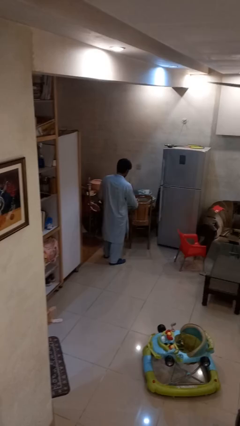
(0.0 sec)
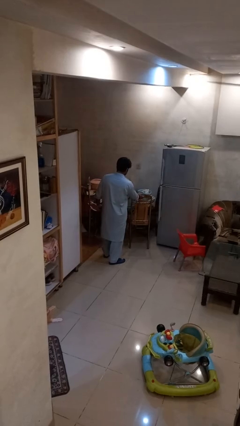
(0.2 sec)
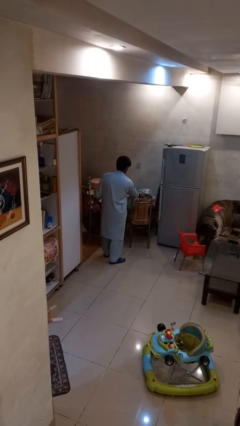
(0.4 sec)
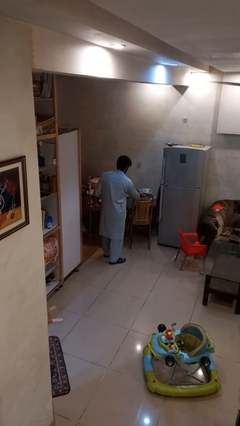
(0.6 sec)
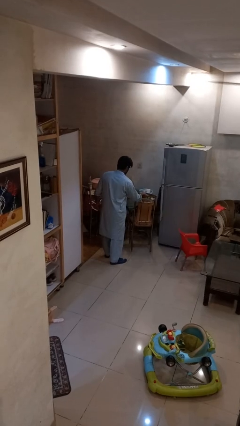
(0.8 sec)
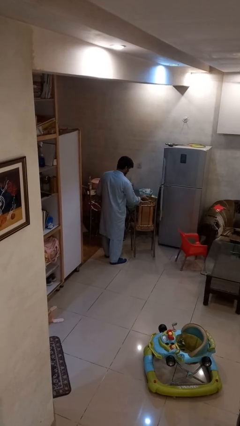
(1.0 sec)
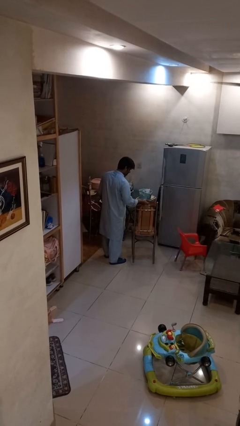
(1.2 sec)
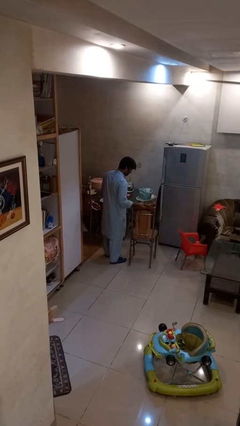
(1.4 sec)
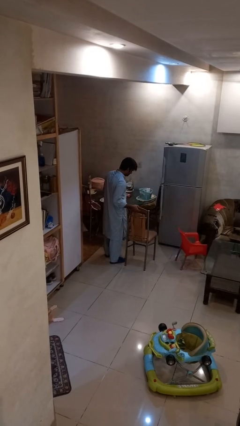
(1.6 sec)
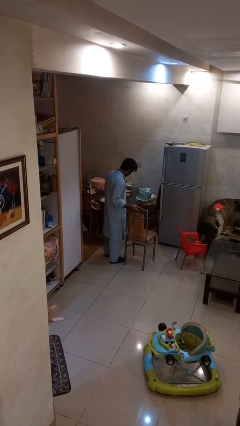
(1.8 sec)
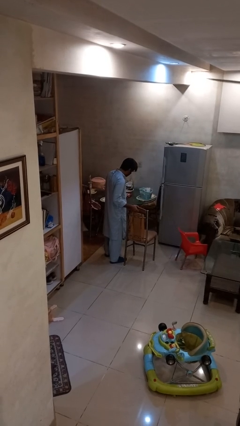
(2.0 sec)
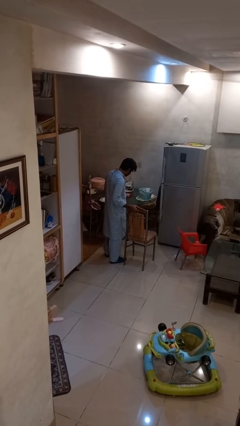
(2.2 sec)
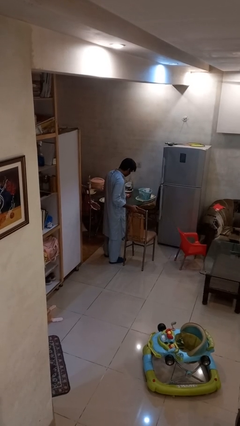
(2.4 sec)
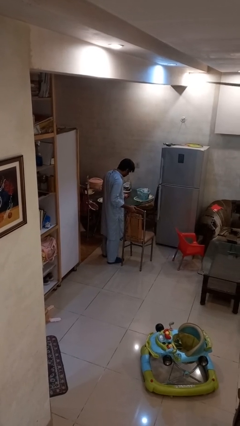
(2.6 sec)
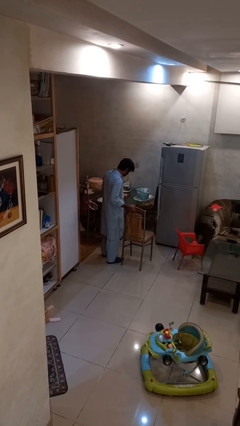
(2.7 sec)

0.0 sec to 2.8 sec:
person pulls out chair

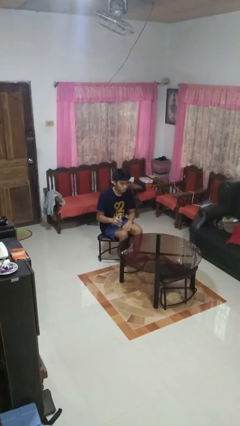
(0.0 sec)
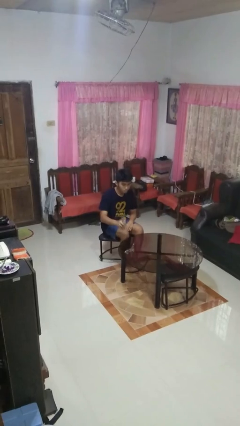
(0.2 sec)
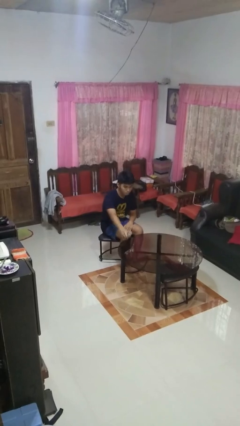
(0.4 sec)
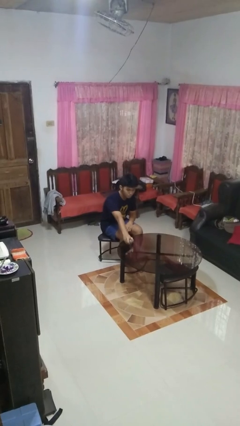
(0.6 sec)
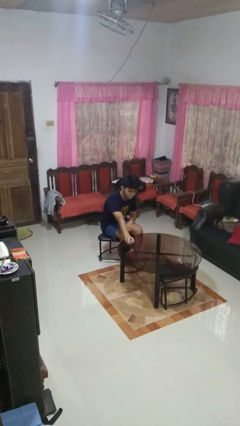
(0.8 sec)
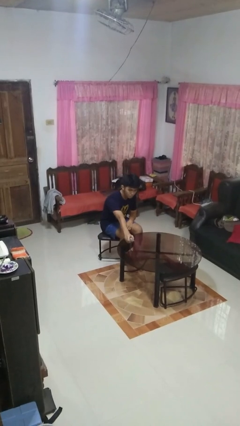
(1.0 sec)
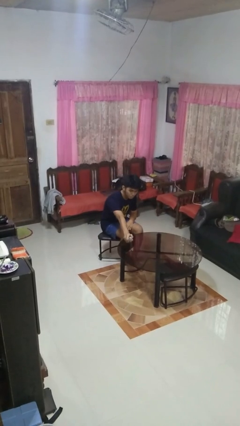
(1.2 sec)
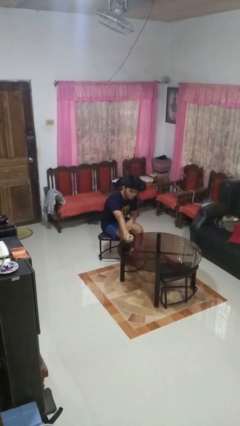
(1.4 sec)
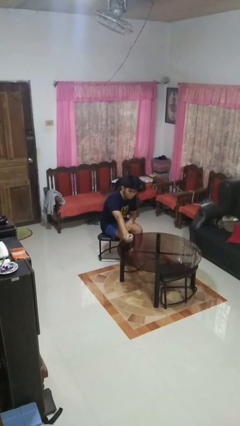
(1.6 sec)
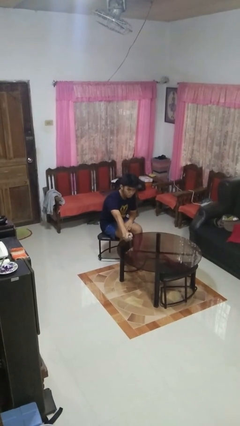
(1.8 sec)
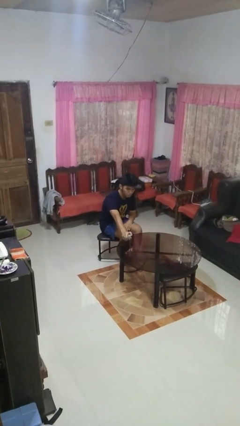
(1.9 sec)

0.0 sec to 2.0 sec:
person sprays from bottle

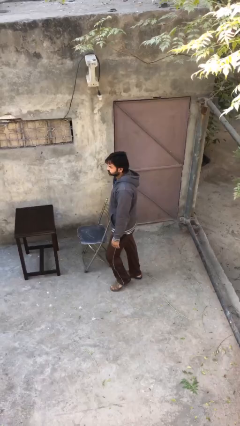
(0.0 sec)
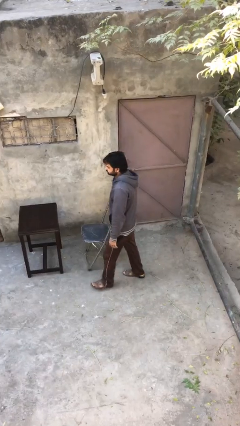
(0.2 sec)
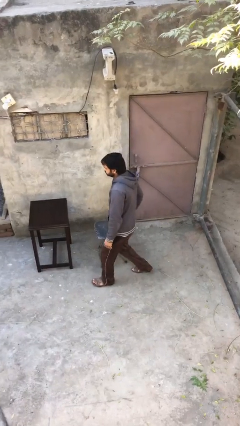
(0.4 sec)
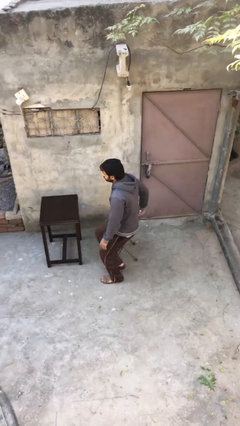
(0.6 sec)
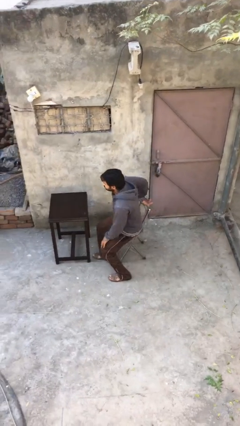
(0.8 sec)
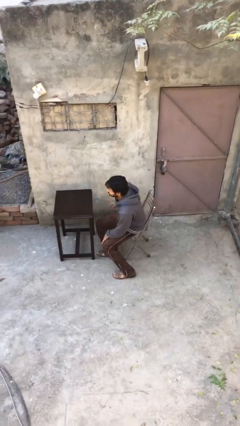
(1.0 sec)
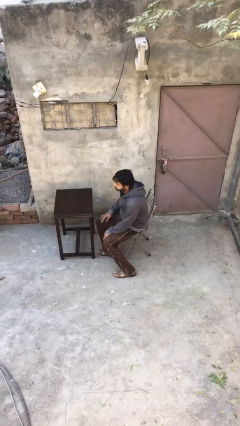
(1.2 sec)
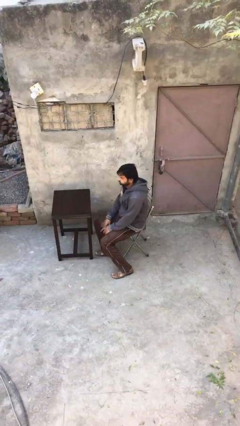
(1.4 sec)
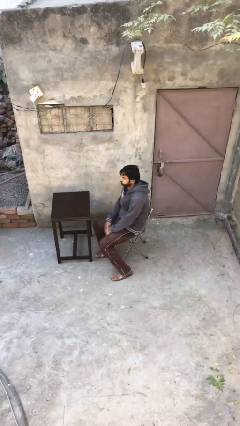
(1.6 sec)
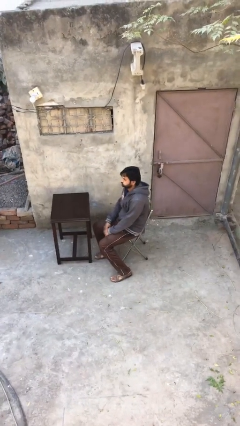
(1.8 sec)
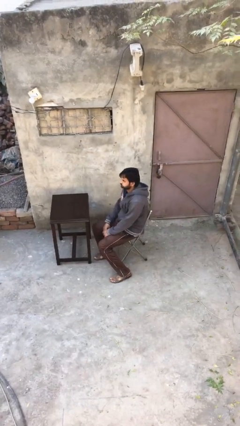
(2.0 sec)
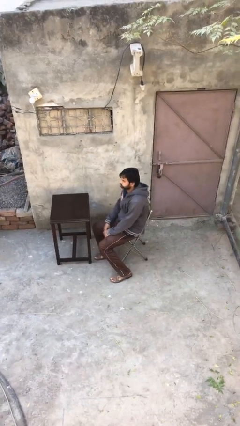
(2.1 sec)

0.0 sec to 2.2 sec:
person sits down

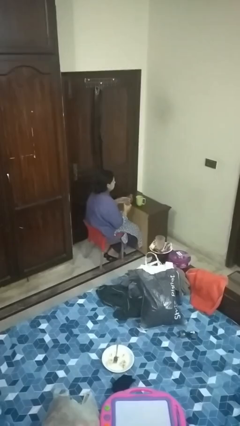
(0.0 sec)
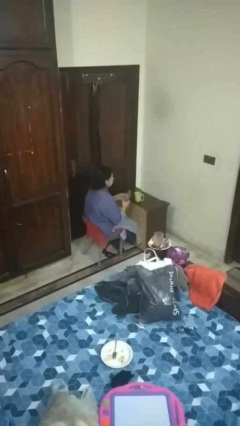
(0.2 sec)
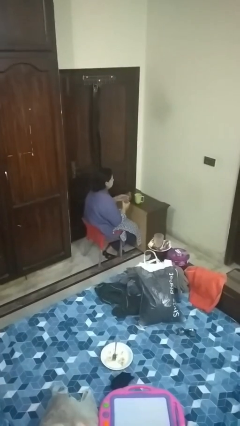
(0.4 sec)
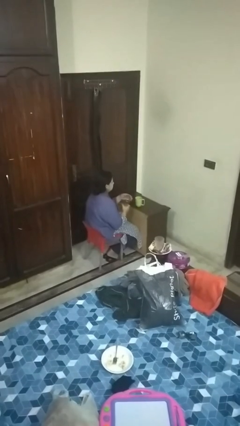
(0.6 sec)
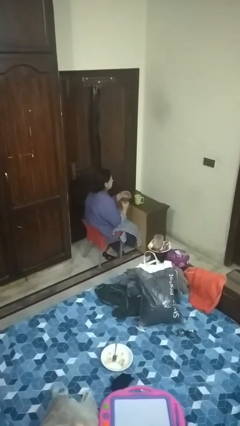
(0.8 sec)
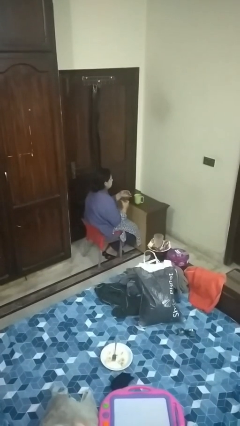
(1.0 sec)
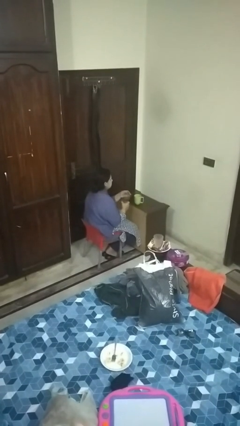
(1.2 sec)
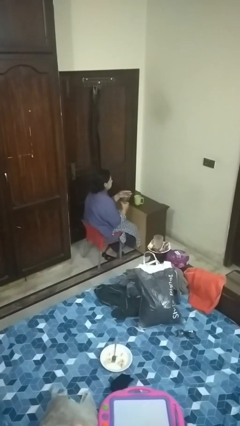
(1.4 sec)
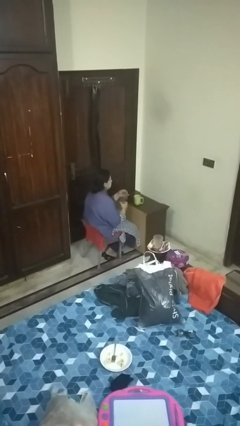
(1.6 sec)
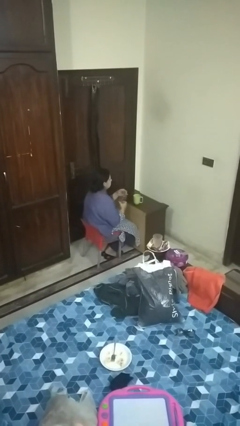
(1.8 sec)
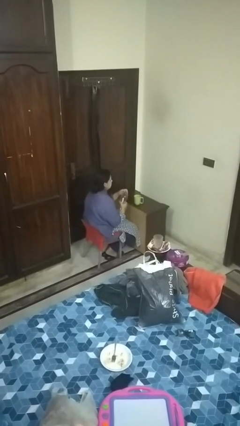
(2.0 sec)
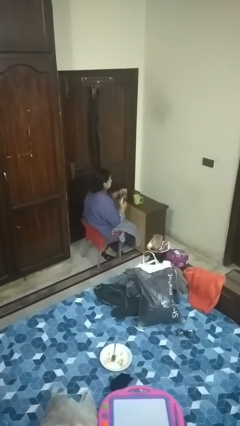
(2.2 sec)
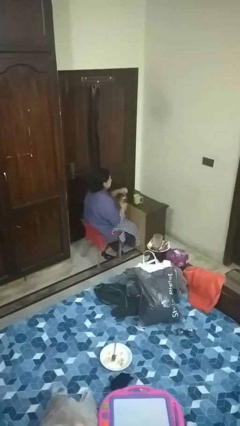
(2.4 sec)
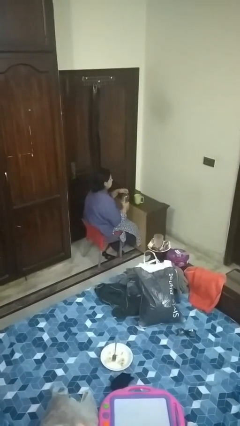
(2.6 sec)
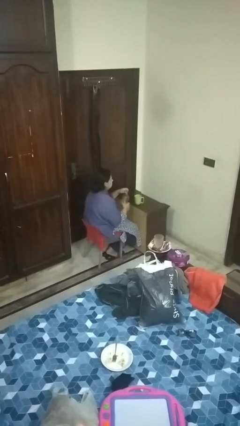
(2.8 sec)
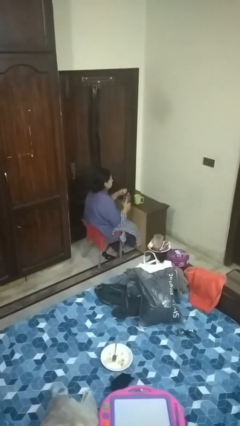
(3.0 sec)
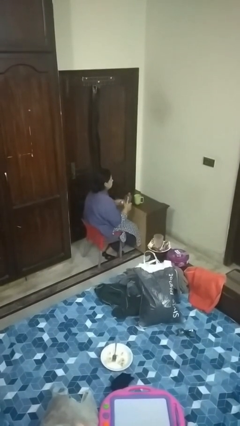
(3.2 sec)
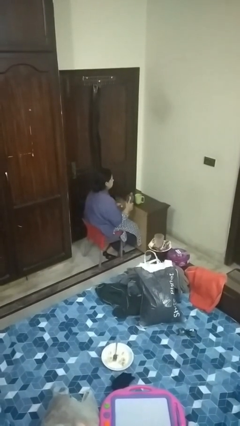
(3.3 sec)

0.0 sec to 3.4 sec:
person unscrews lid from bottle

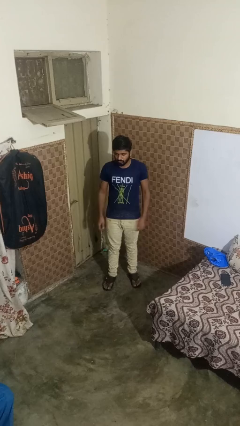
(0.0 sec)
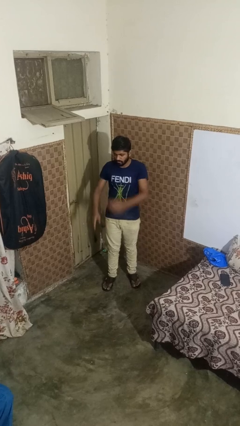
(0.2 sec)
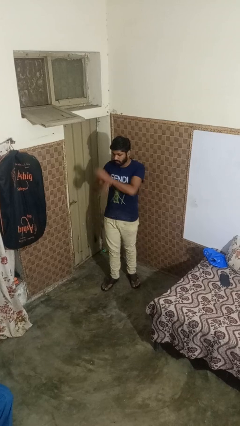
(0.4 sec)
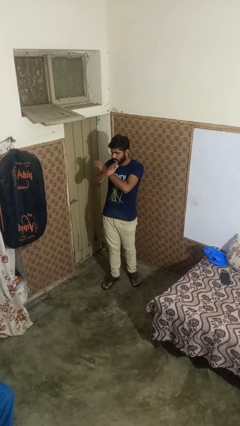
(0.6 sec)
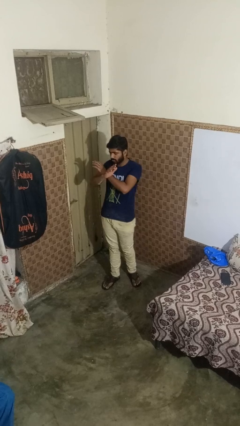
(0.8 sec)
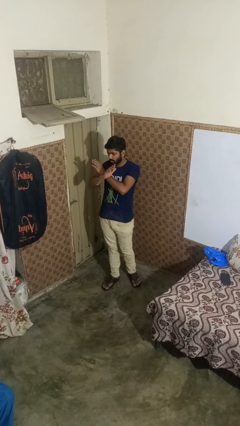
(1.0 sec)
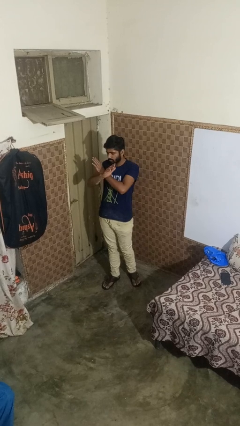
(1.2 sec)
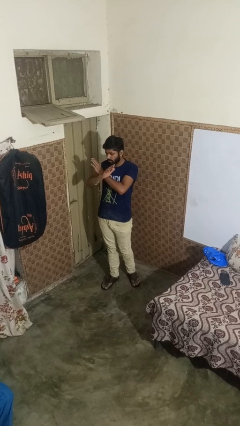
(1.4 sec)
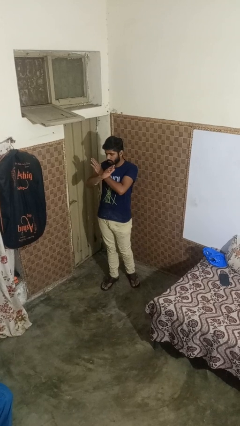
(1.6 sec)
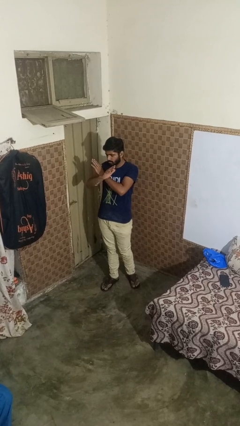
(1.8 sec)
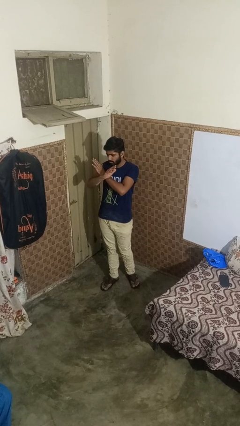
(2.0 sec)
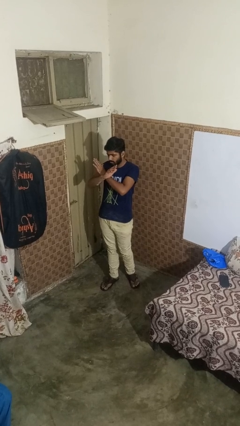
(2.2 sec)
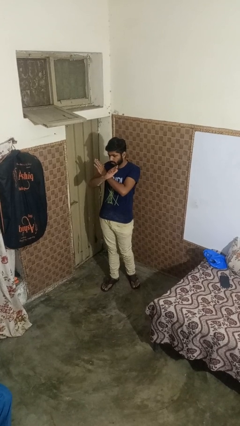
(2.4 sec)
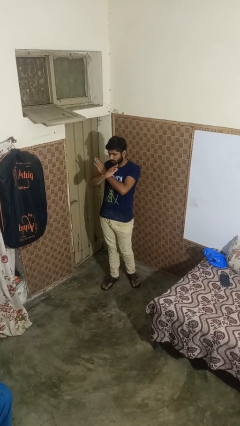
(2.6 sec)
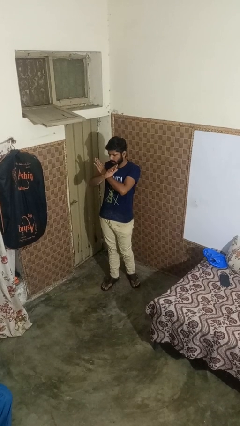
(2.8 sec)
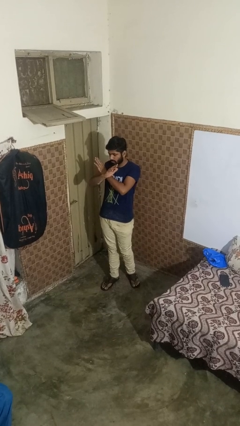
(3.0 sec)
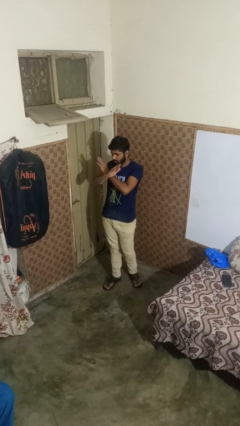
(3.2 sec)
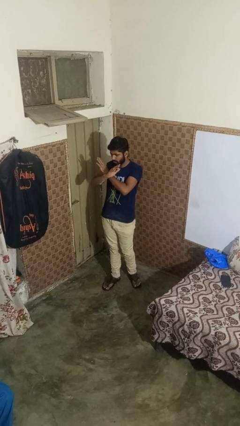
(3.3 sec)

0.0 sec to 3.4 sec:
person gestures arms x

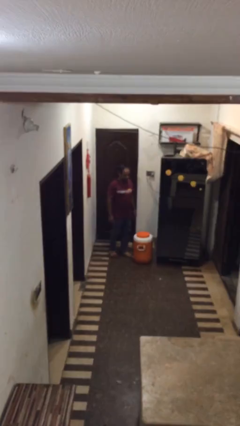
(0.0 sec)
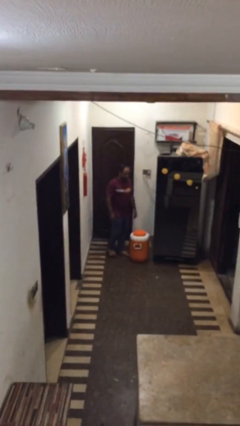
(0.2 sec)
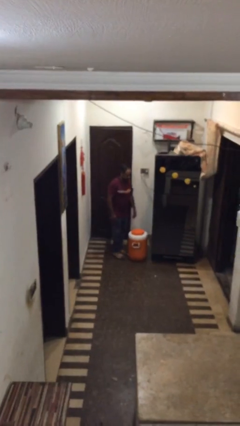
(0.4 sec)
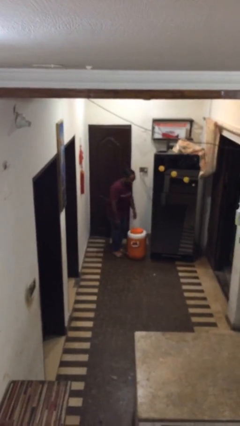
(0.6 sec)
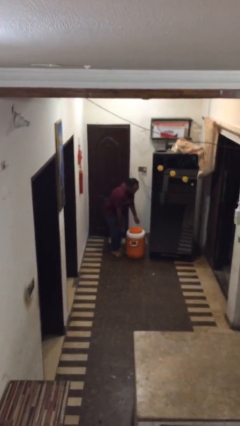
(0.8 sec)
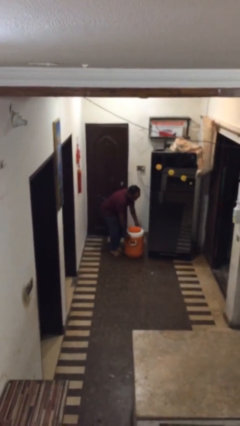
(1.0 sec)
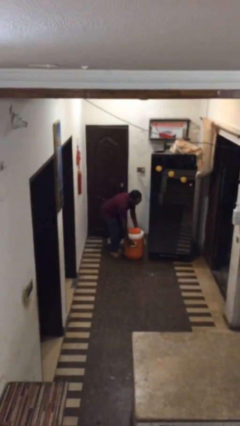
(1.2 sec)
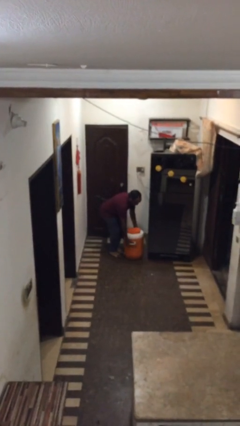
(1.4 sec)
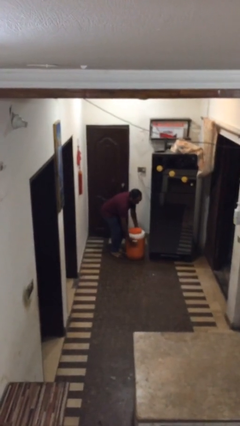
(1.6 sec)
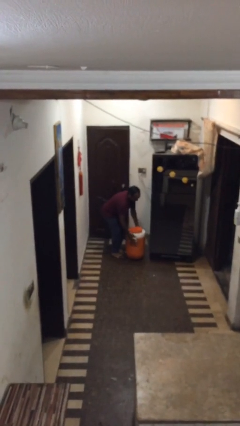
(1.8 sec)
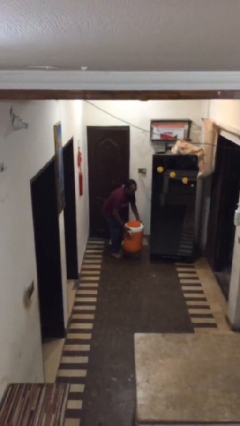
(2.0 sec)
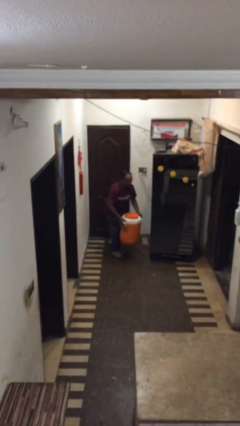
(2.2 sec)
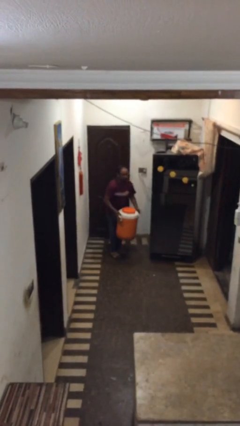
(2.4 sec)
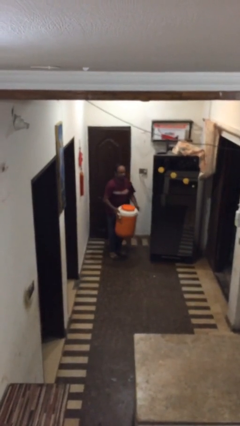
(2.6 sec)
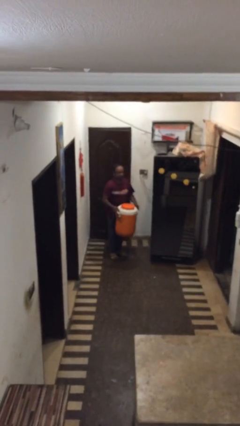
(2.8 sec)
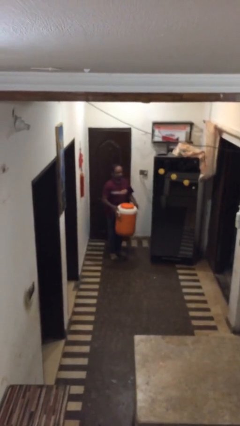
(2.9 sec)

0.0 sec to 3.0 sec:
person picks up object from floor

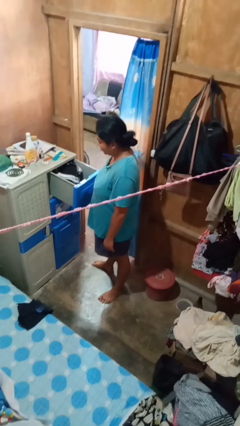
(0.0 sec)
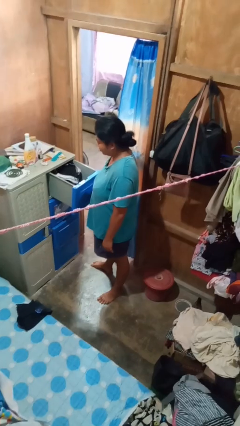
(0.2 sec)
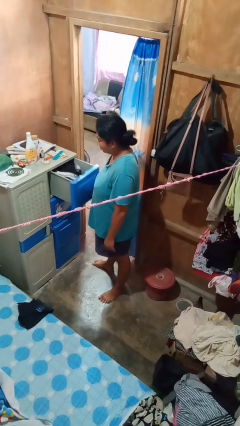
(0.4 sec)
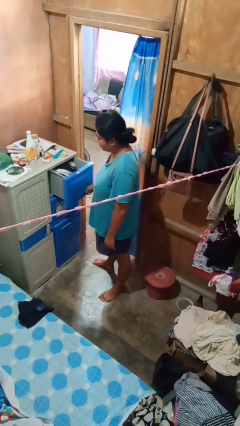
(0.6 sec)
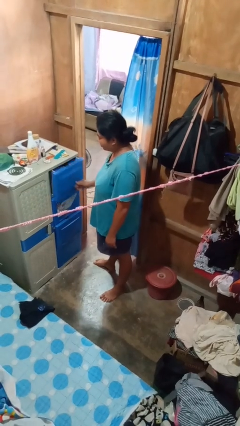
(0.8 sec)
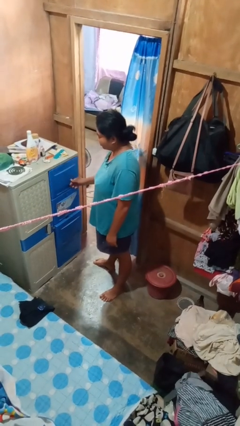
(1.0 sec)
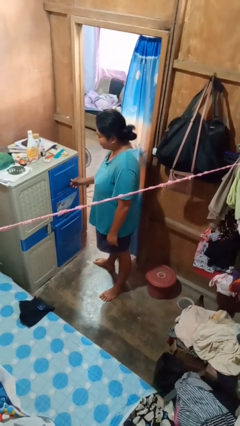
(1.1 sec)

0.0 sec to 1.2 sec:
person closes dresser drawer
